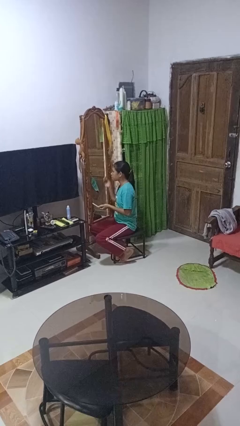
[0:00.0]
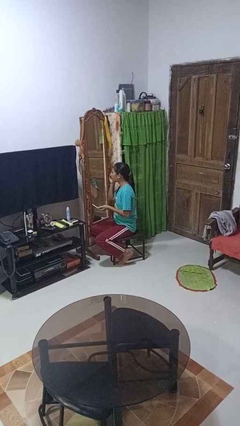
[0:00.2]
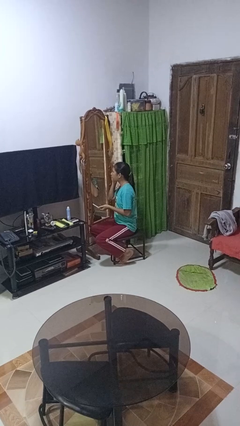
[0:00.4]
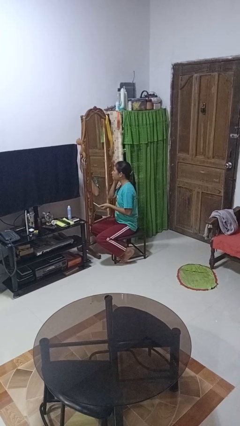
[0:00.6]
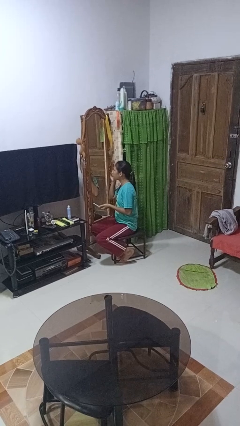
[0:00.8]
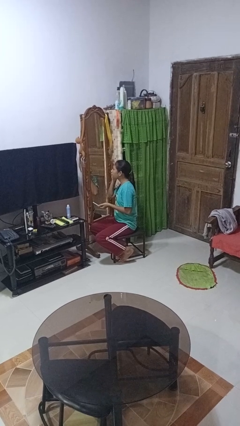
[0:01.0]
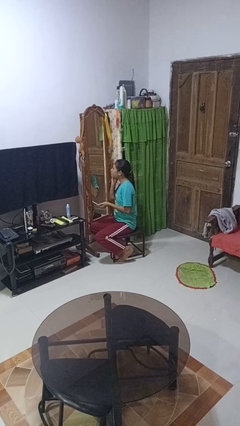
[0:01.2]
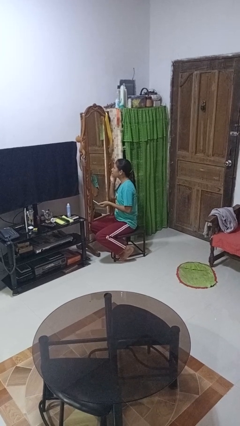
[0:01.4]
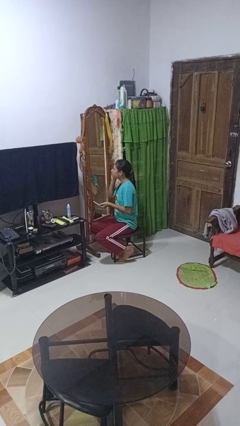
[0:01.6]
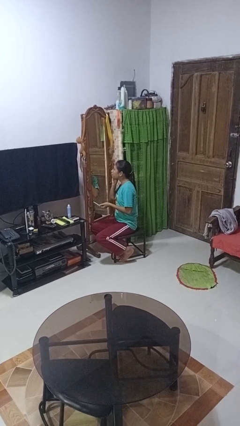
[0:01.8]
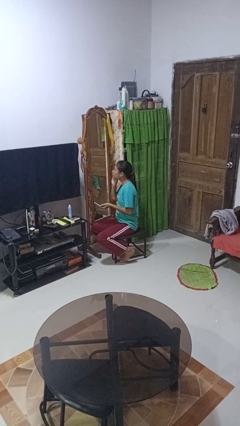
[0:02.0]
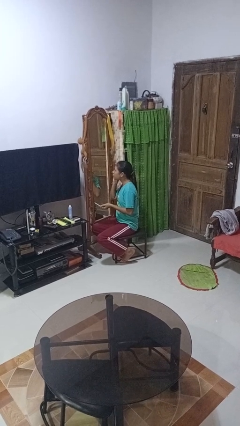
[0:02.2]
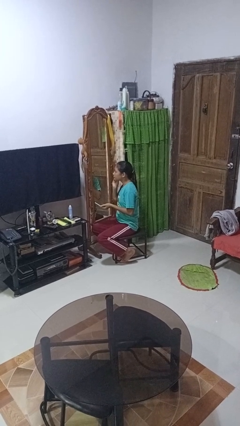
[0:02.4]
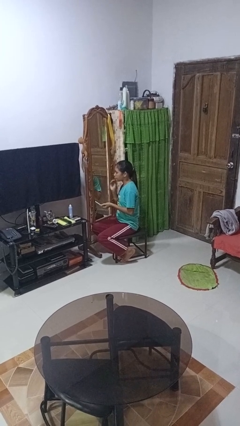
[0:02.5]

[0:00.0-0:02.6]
person applies foundation makeup

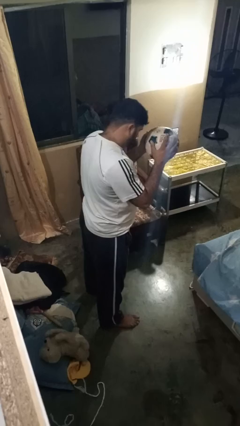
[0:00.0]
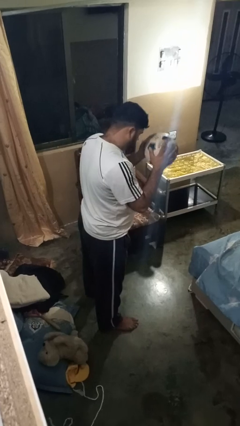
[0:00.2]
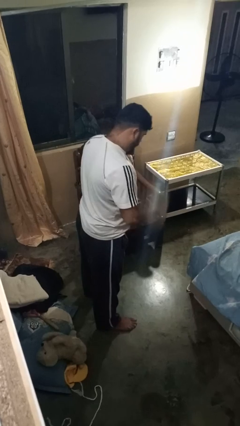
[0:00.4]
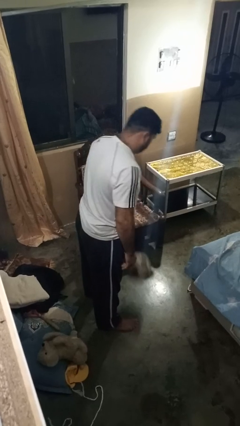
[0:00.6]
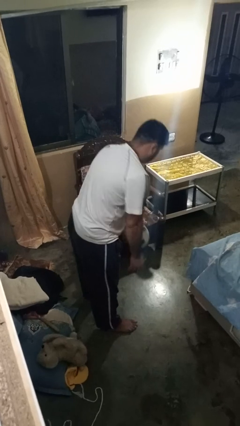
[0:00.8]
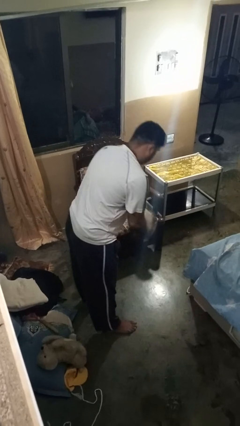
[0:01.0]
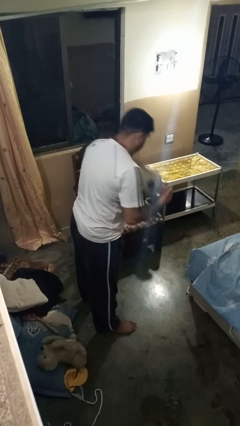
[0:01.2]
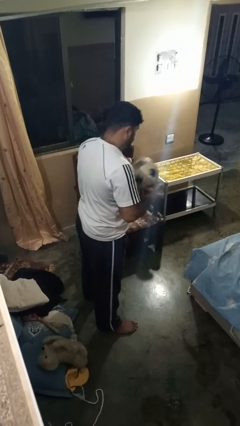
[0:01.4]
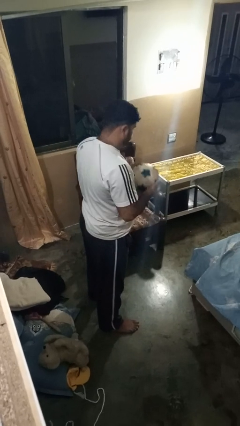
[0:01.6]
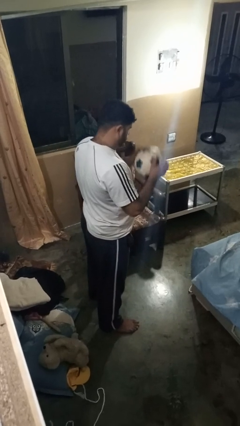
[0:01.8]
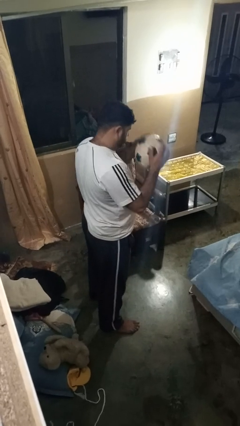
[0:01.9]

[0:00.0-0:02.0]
person bounces ball on floor

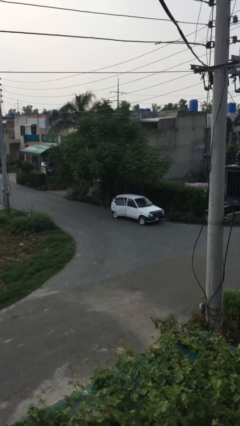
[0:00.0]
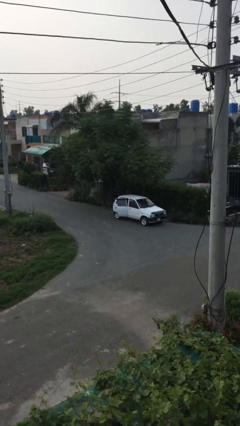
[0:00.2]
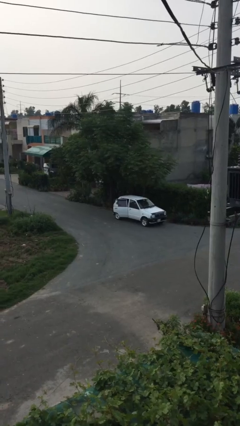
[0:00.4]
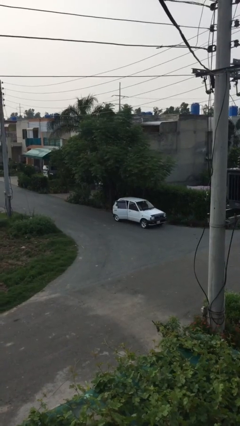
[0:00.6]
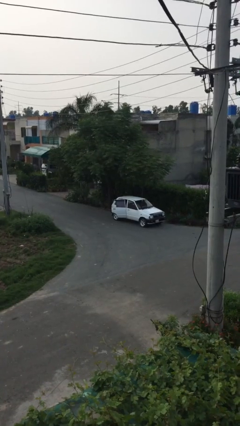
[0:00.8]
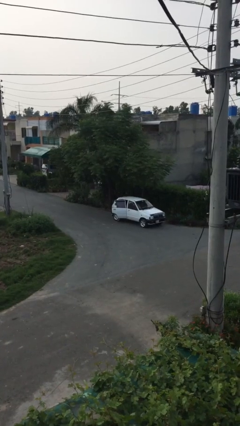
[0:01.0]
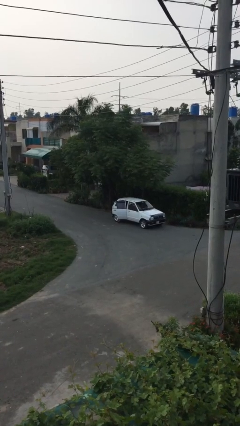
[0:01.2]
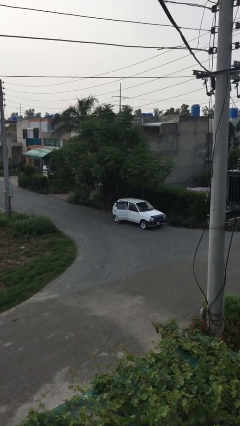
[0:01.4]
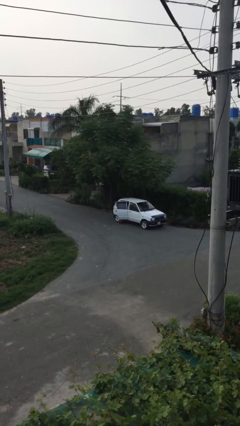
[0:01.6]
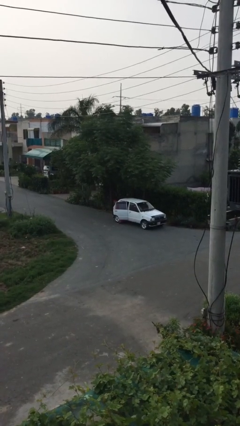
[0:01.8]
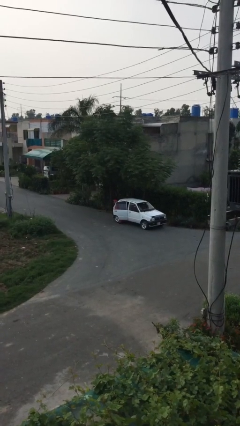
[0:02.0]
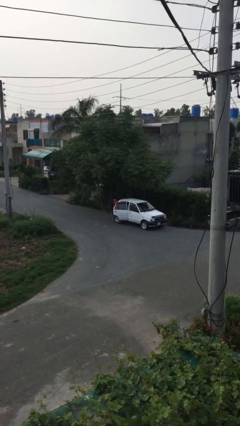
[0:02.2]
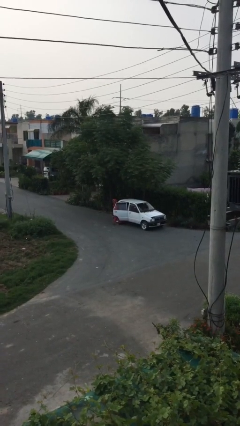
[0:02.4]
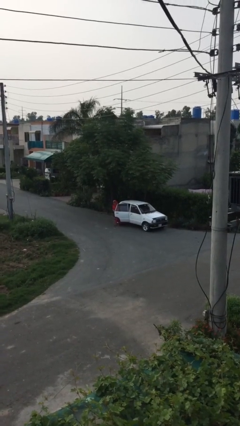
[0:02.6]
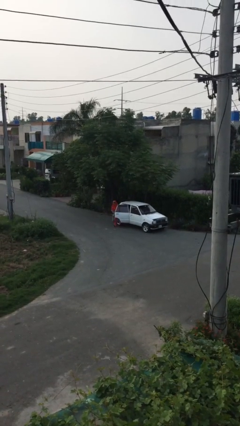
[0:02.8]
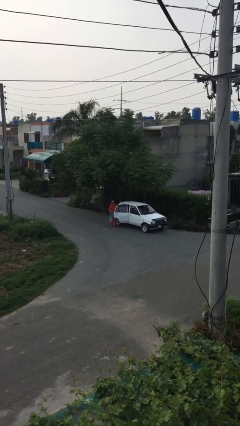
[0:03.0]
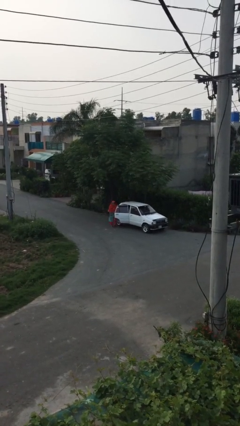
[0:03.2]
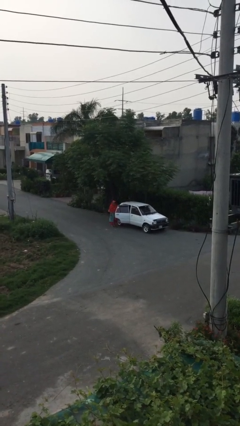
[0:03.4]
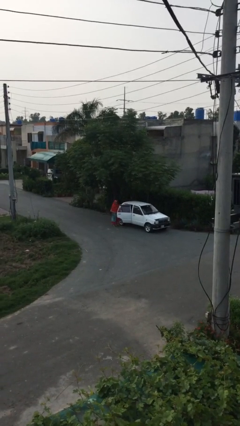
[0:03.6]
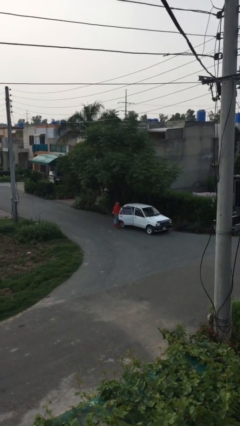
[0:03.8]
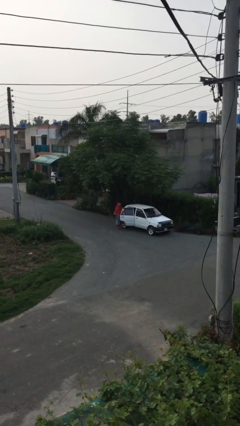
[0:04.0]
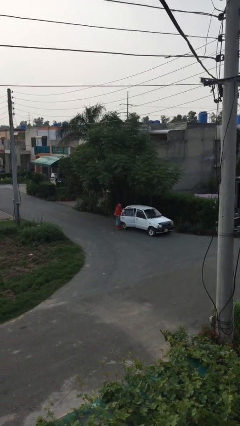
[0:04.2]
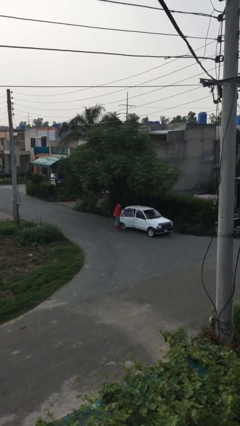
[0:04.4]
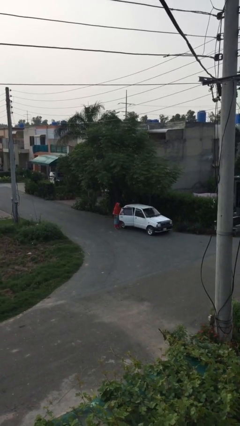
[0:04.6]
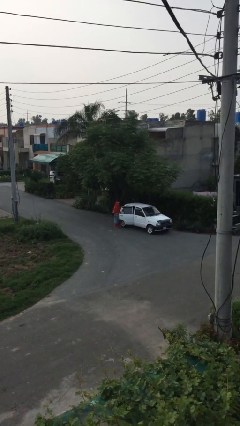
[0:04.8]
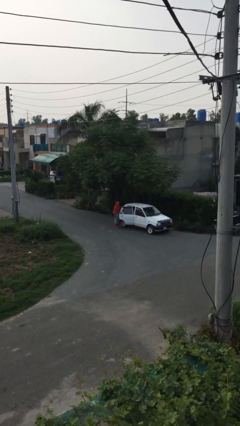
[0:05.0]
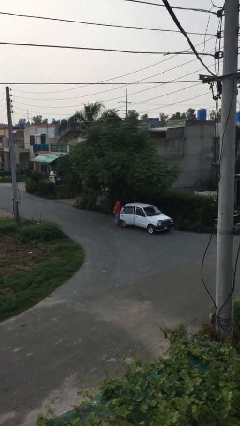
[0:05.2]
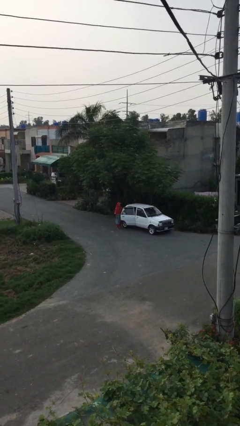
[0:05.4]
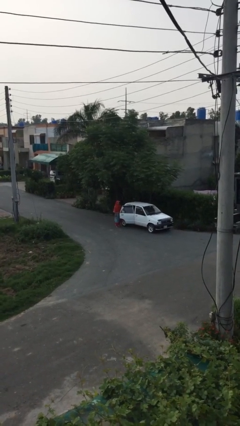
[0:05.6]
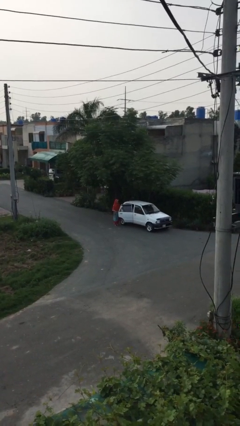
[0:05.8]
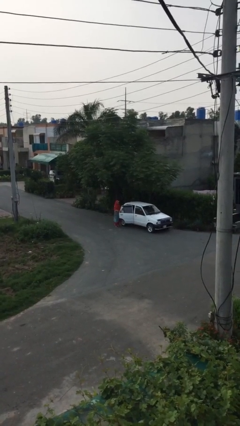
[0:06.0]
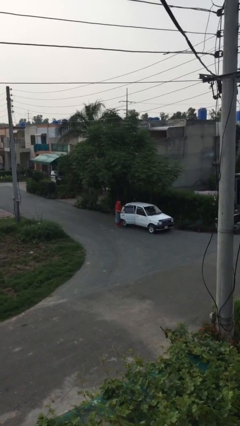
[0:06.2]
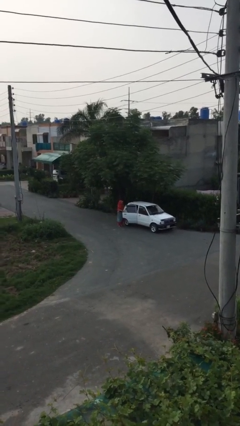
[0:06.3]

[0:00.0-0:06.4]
person exits car

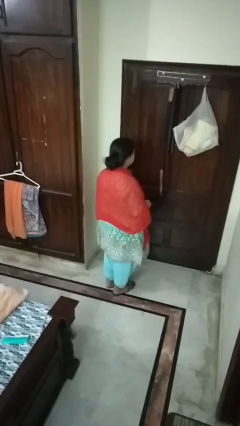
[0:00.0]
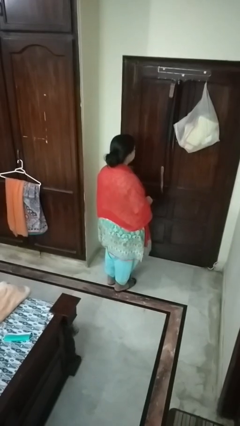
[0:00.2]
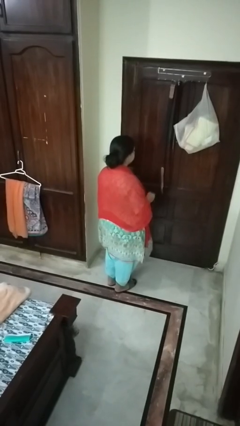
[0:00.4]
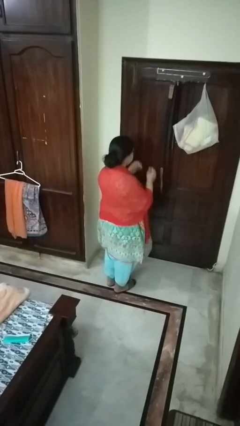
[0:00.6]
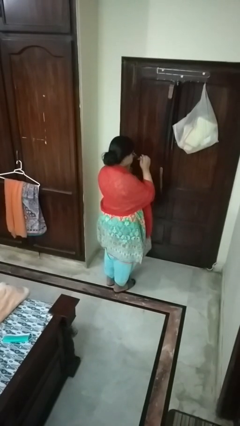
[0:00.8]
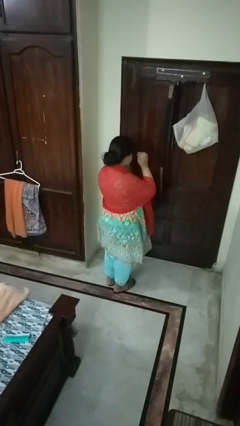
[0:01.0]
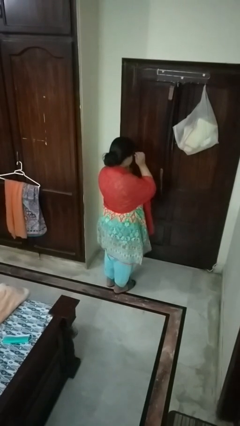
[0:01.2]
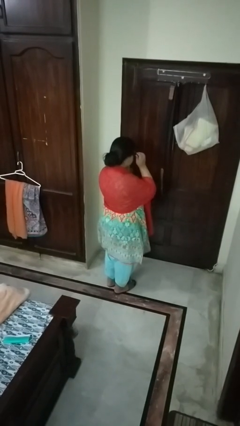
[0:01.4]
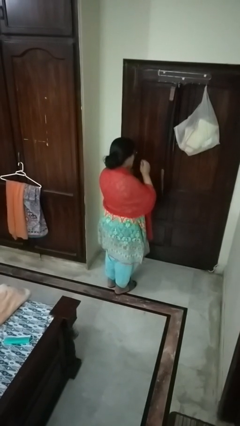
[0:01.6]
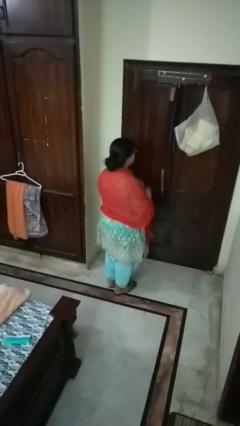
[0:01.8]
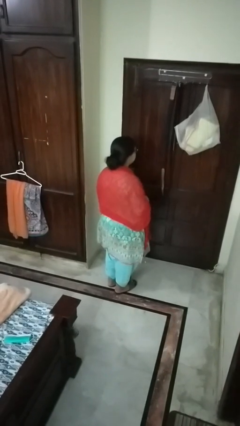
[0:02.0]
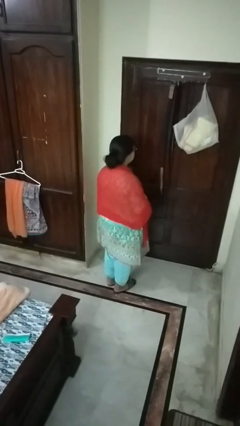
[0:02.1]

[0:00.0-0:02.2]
person puts on glasses

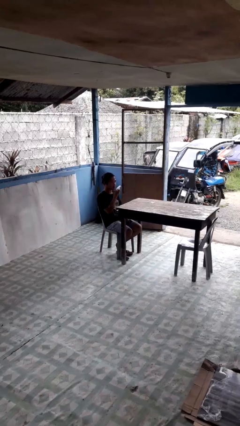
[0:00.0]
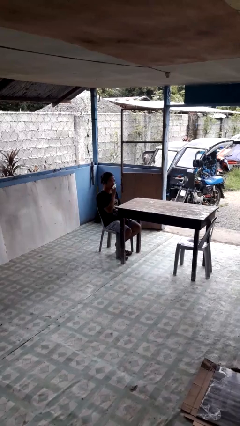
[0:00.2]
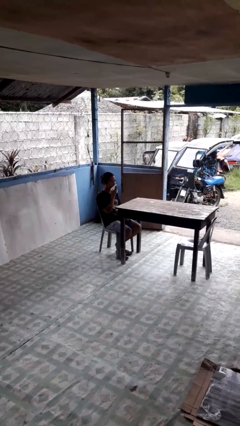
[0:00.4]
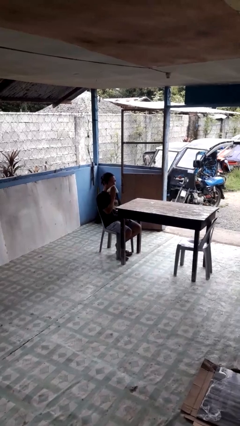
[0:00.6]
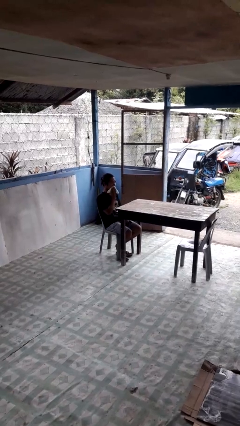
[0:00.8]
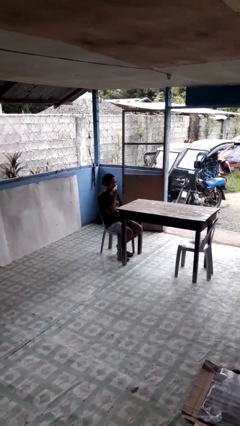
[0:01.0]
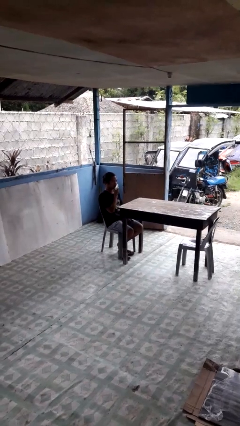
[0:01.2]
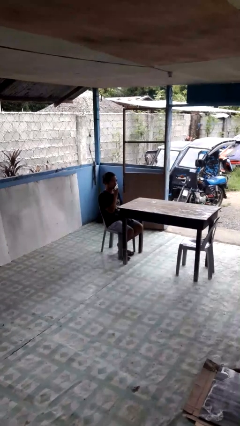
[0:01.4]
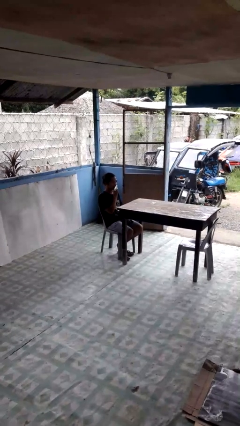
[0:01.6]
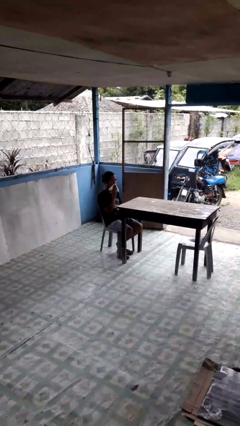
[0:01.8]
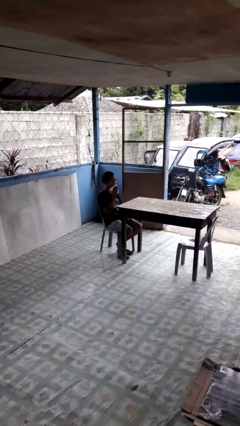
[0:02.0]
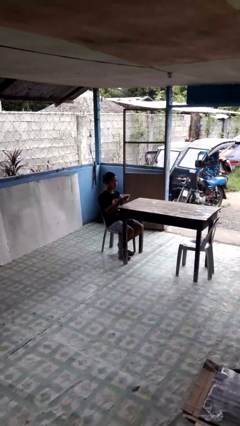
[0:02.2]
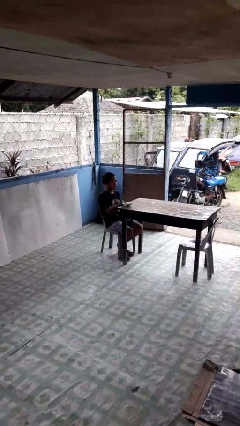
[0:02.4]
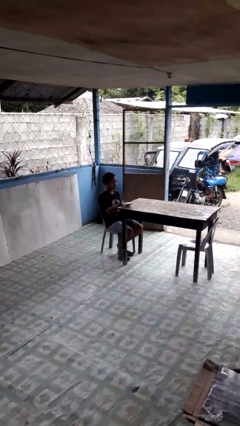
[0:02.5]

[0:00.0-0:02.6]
person wipes mouth with napkin

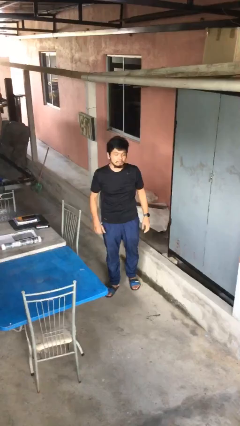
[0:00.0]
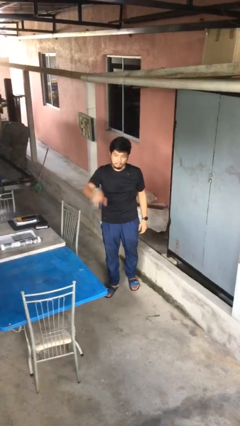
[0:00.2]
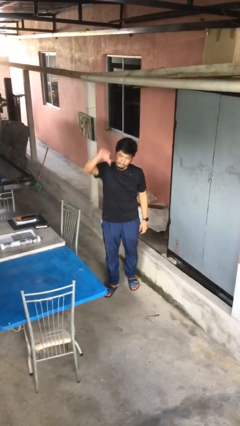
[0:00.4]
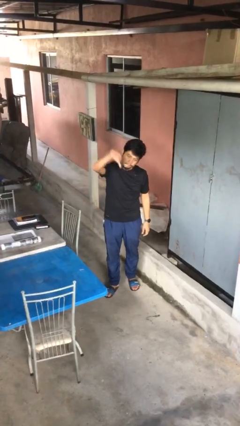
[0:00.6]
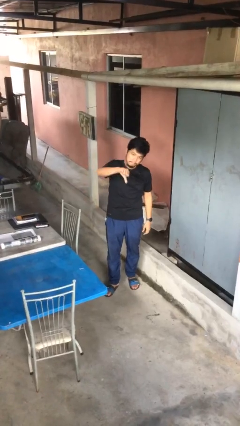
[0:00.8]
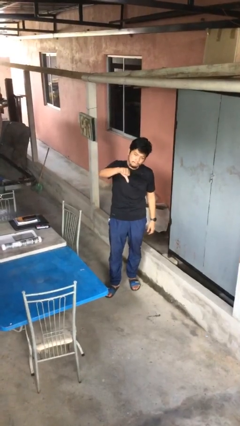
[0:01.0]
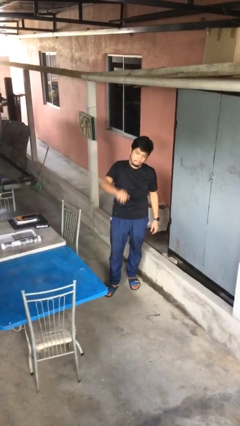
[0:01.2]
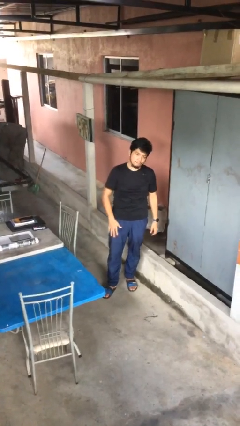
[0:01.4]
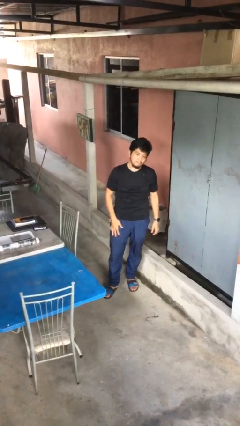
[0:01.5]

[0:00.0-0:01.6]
person gestures thumbs down

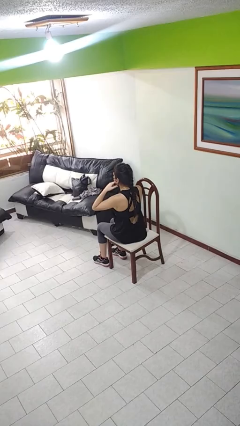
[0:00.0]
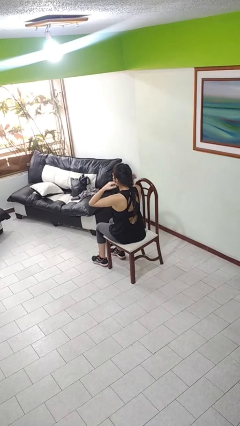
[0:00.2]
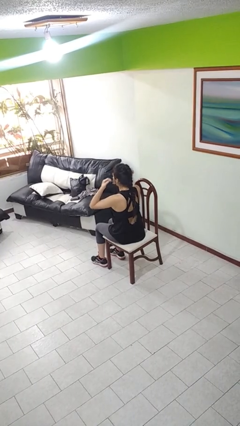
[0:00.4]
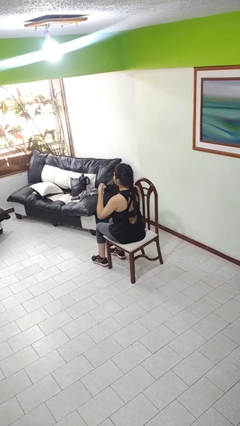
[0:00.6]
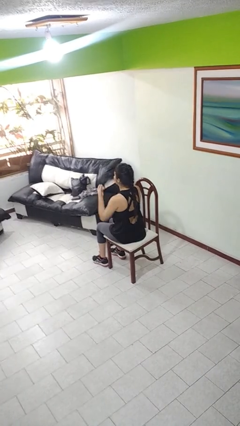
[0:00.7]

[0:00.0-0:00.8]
person takes off facemask
